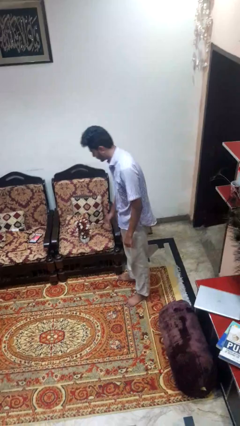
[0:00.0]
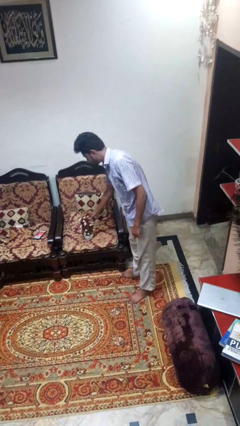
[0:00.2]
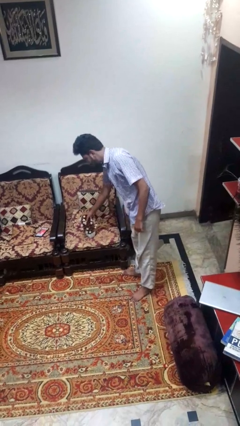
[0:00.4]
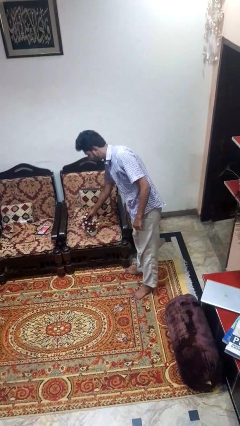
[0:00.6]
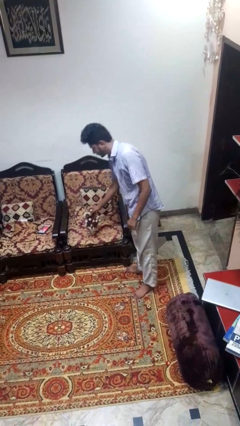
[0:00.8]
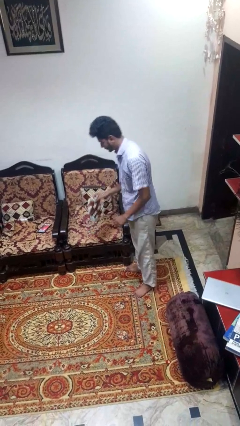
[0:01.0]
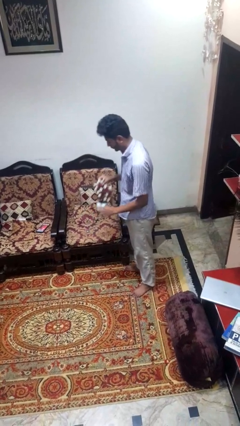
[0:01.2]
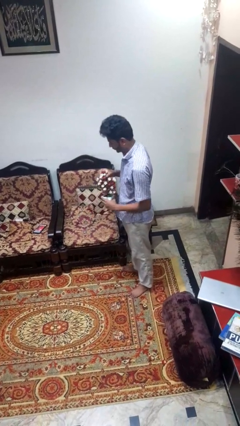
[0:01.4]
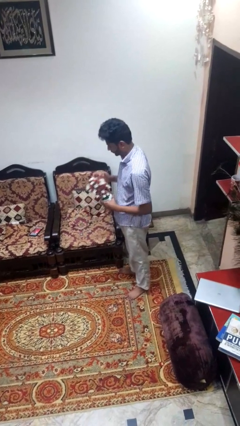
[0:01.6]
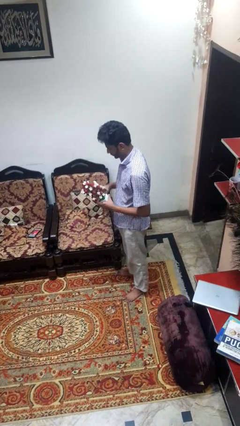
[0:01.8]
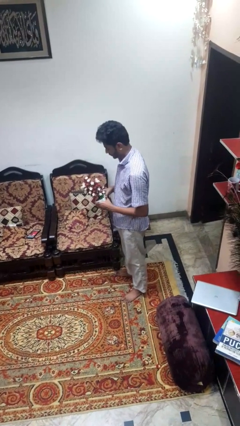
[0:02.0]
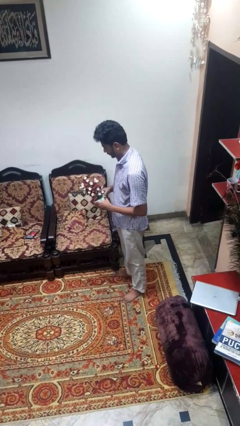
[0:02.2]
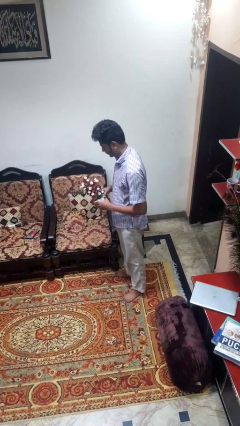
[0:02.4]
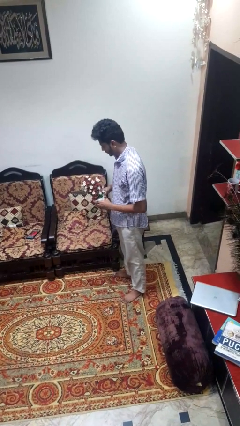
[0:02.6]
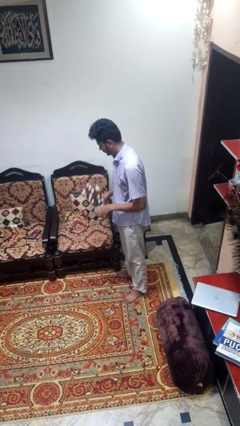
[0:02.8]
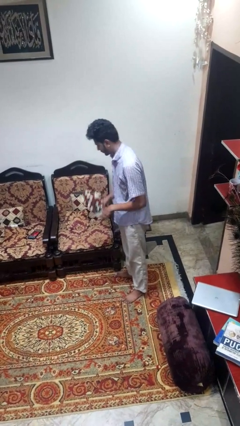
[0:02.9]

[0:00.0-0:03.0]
person picks up object from couch

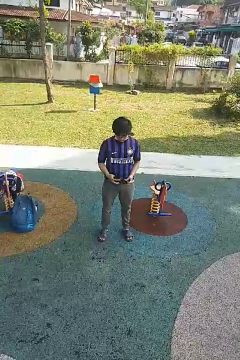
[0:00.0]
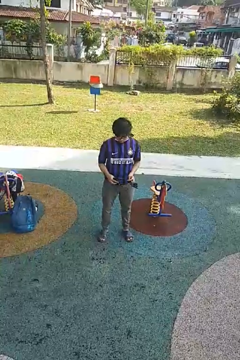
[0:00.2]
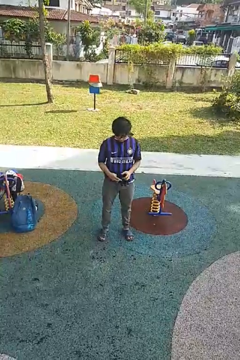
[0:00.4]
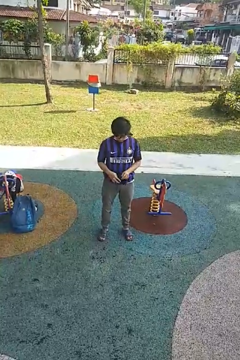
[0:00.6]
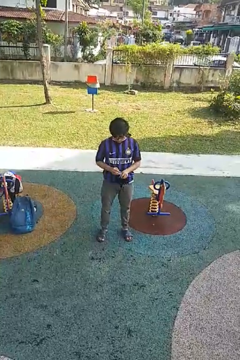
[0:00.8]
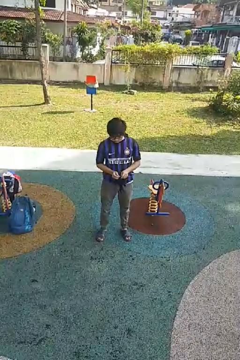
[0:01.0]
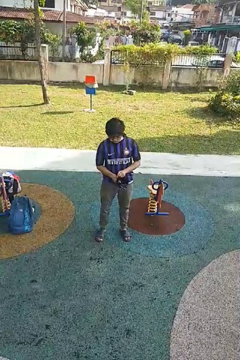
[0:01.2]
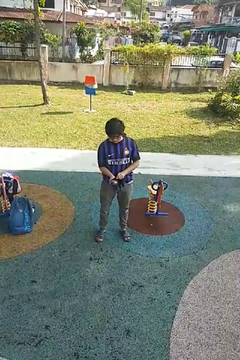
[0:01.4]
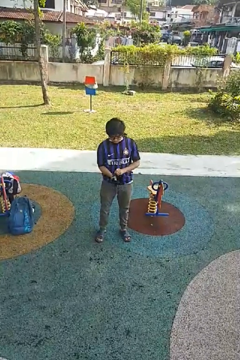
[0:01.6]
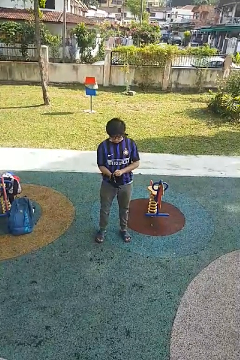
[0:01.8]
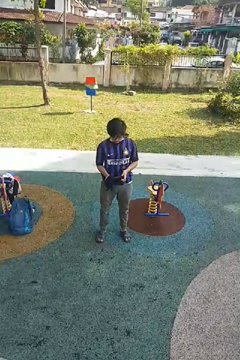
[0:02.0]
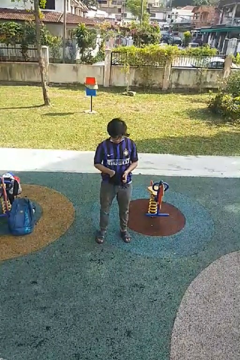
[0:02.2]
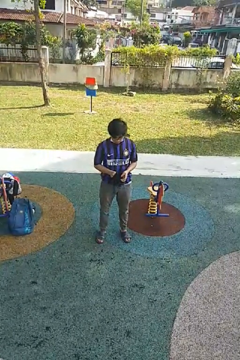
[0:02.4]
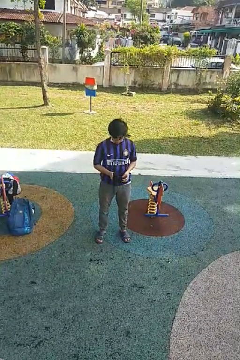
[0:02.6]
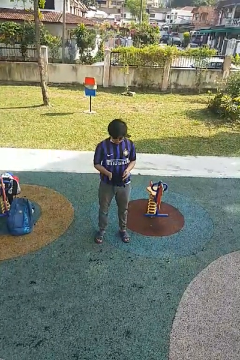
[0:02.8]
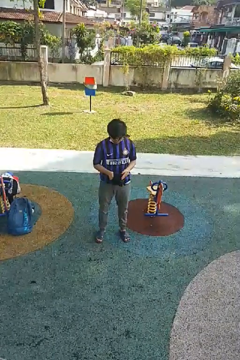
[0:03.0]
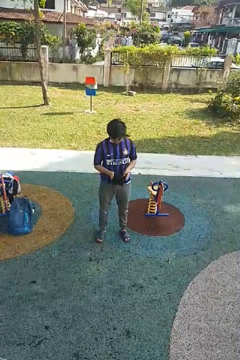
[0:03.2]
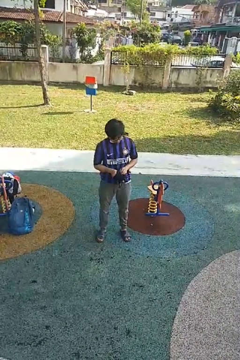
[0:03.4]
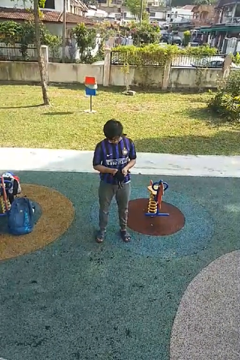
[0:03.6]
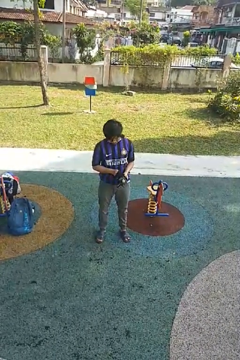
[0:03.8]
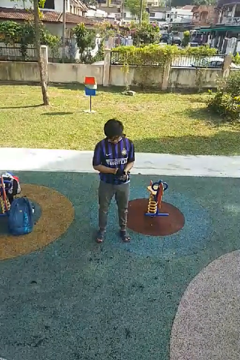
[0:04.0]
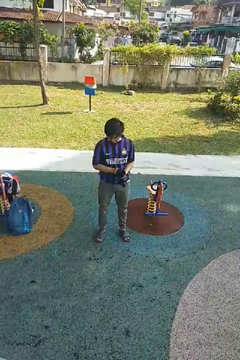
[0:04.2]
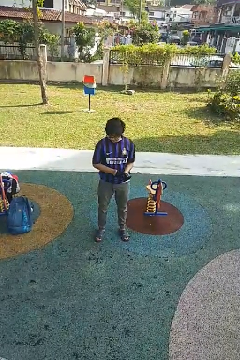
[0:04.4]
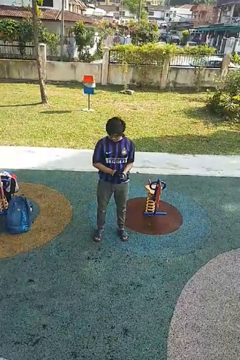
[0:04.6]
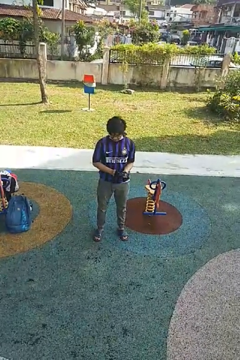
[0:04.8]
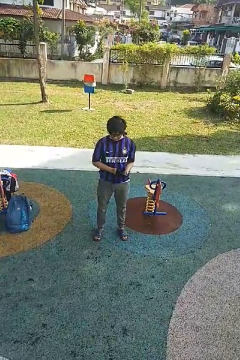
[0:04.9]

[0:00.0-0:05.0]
person puts on gloves

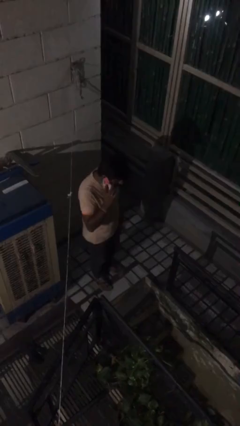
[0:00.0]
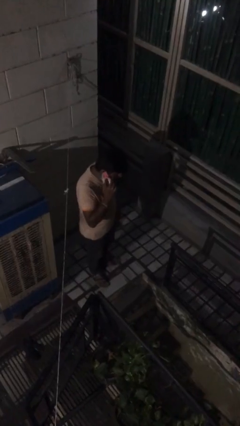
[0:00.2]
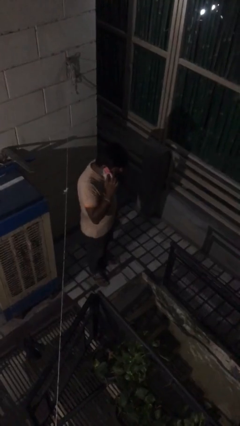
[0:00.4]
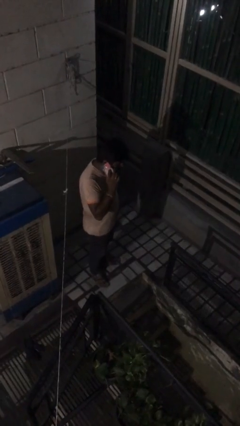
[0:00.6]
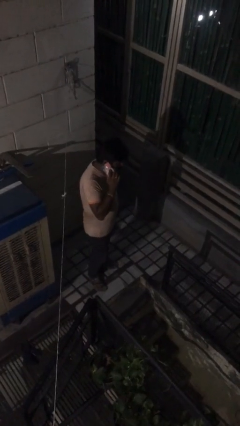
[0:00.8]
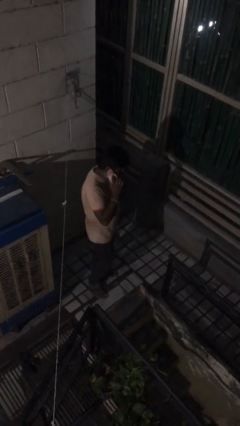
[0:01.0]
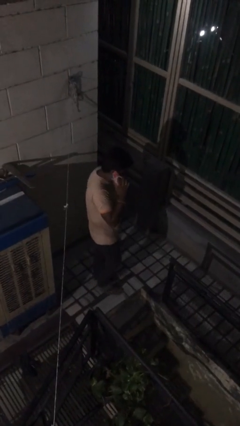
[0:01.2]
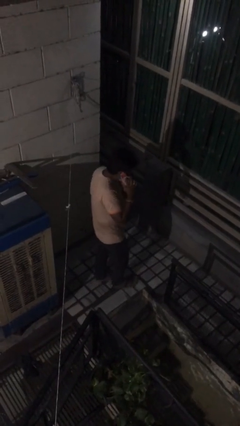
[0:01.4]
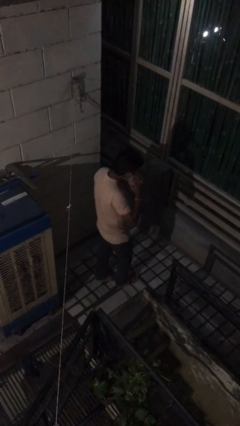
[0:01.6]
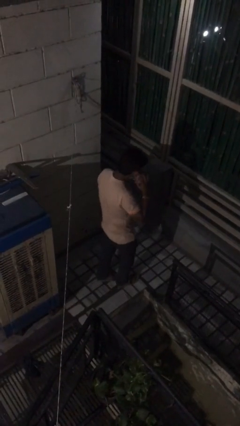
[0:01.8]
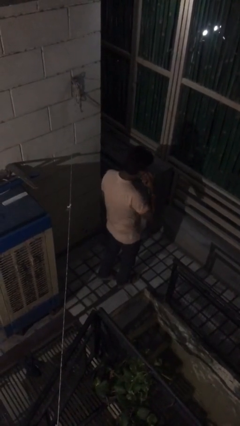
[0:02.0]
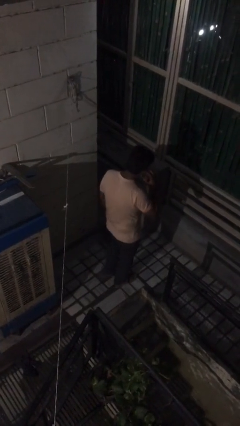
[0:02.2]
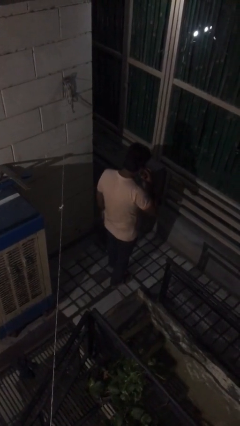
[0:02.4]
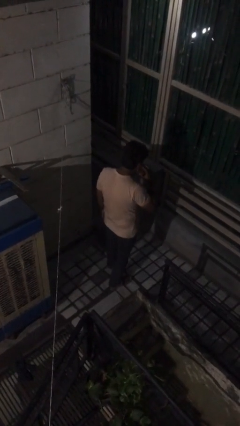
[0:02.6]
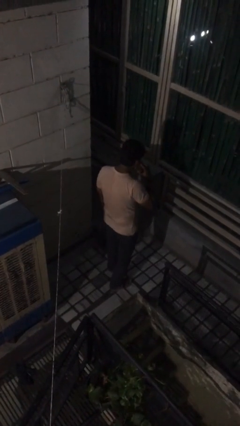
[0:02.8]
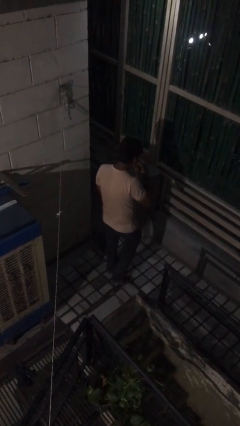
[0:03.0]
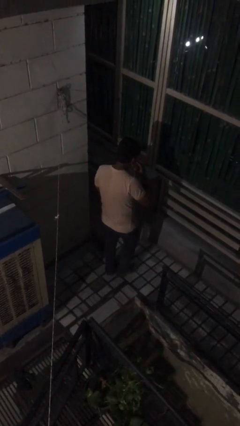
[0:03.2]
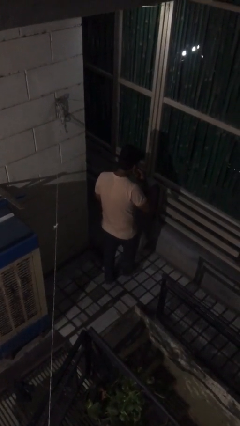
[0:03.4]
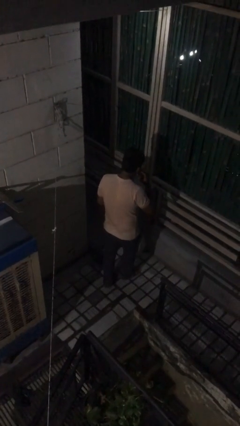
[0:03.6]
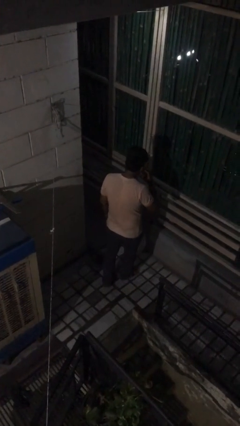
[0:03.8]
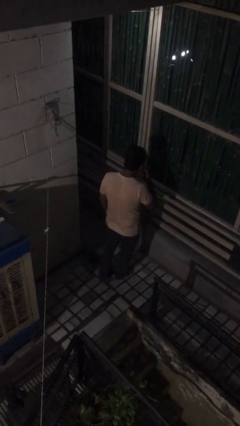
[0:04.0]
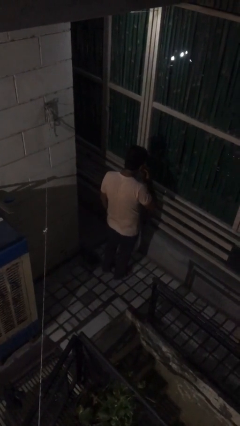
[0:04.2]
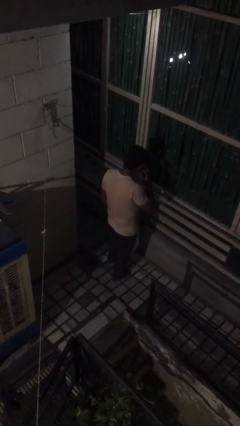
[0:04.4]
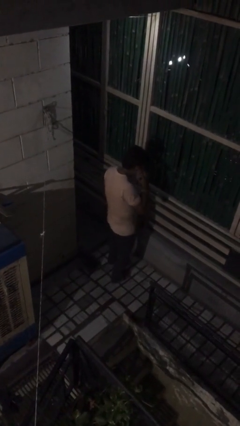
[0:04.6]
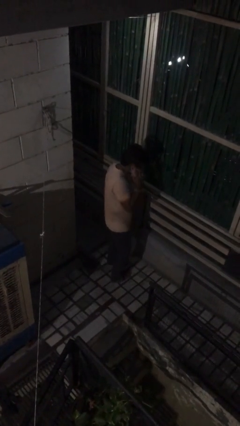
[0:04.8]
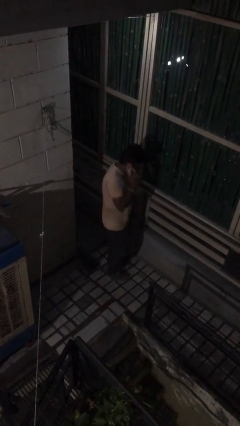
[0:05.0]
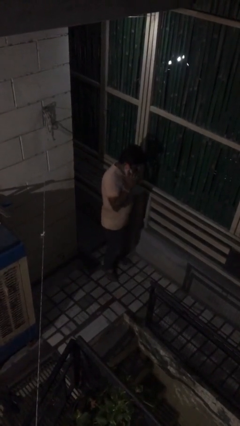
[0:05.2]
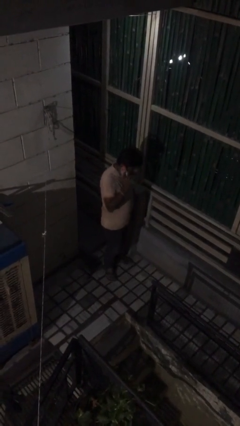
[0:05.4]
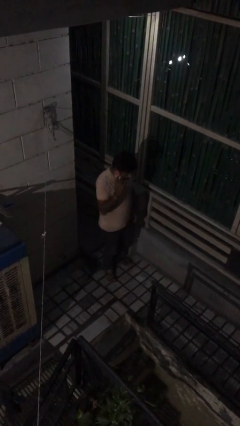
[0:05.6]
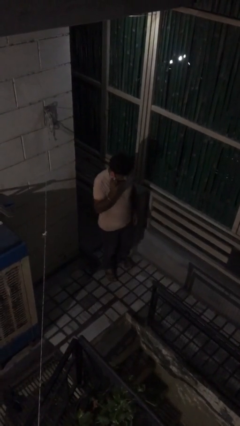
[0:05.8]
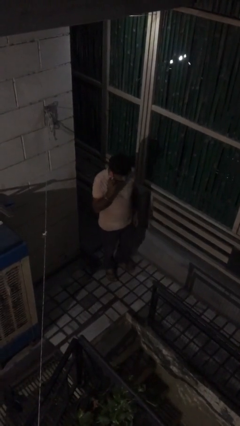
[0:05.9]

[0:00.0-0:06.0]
person talks on phone

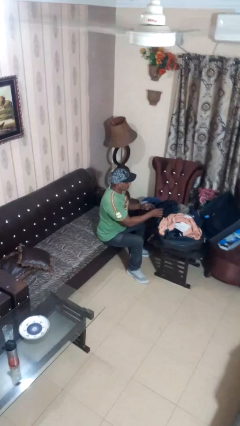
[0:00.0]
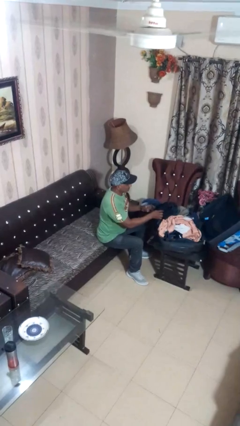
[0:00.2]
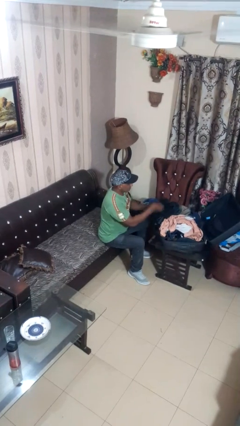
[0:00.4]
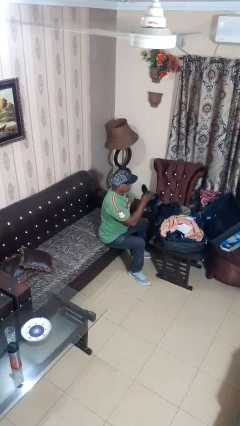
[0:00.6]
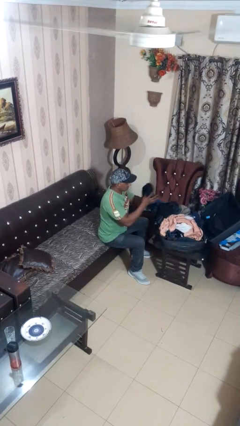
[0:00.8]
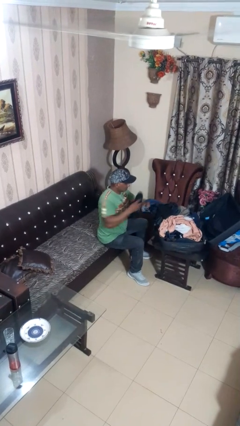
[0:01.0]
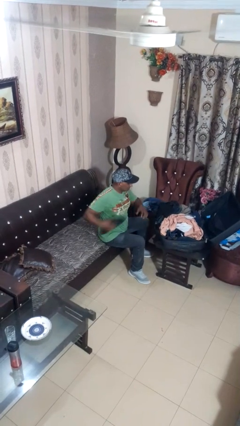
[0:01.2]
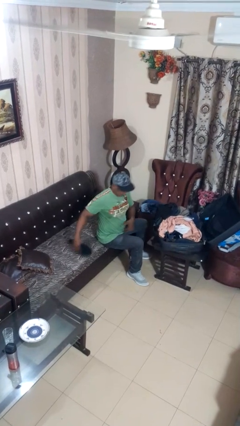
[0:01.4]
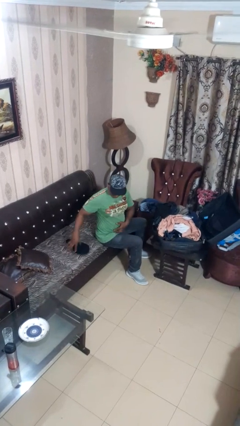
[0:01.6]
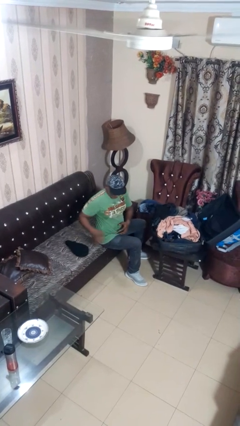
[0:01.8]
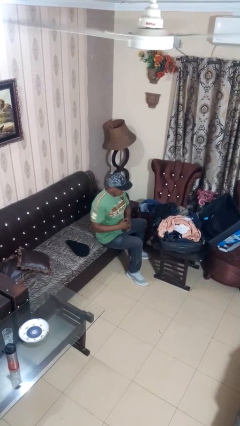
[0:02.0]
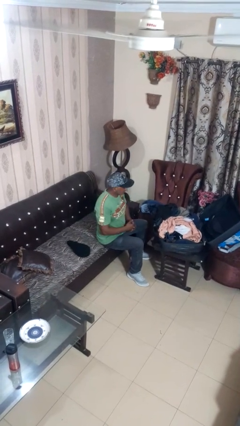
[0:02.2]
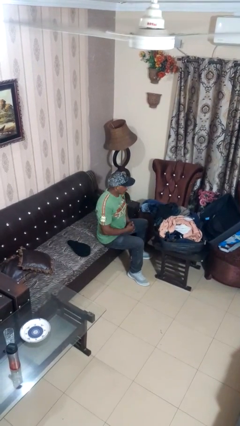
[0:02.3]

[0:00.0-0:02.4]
person unloads clothes from suitcase

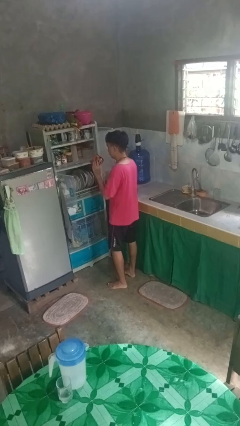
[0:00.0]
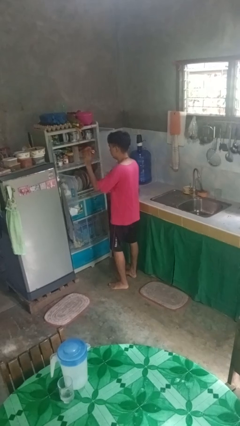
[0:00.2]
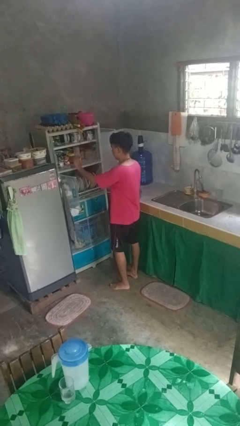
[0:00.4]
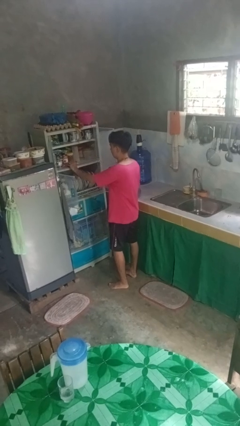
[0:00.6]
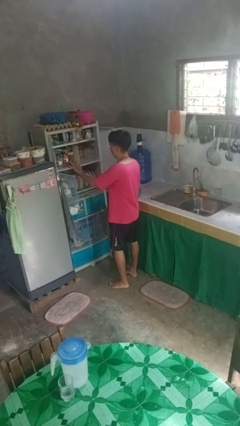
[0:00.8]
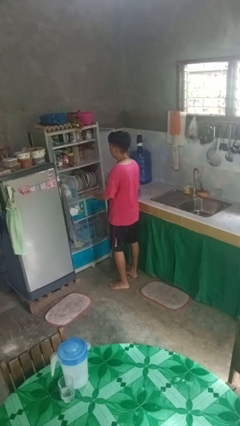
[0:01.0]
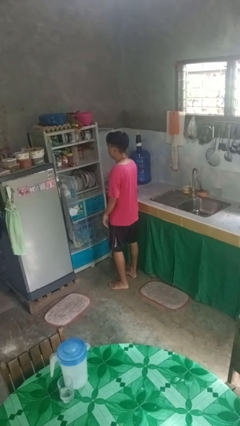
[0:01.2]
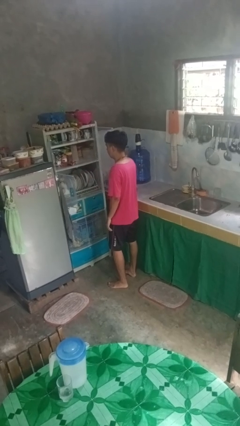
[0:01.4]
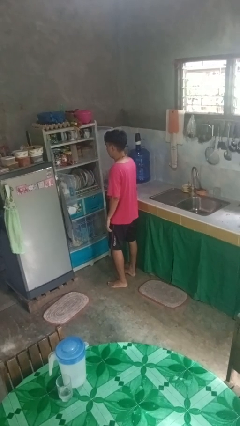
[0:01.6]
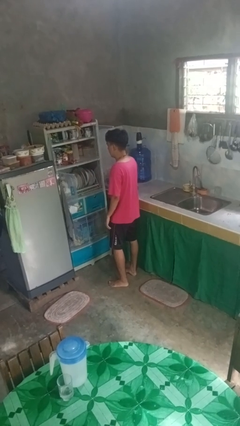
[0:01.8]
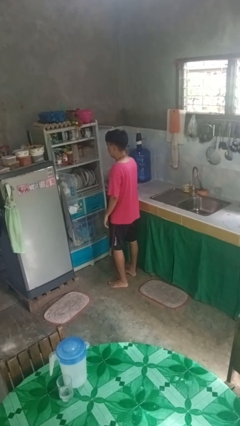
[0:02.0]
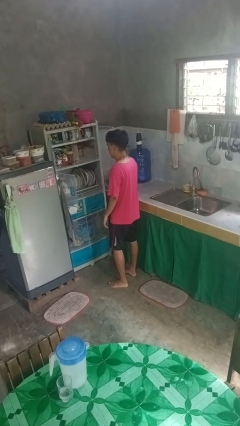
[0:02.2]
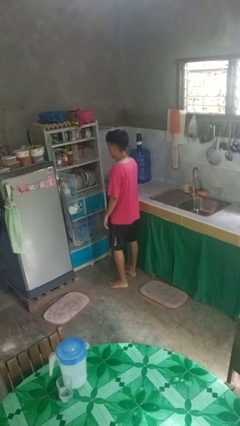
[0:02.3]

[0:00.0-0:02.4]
person puts object in cabinet
